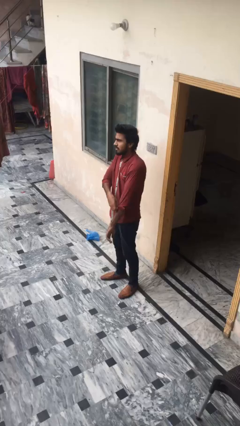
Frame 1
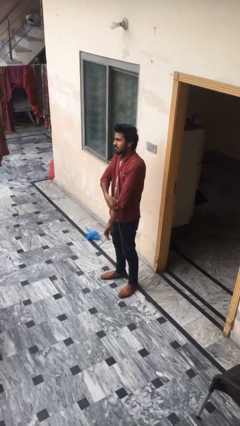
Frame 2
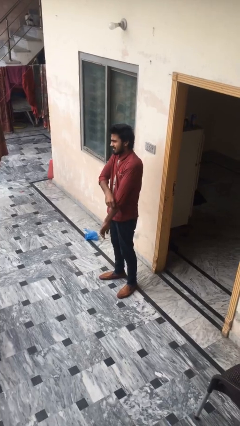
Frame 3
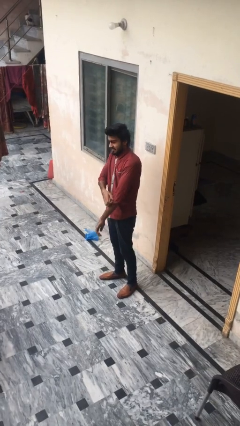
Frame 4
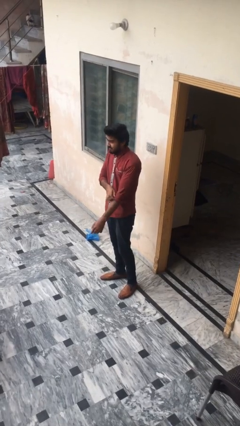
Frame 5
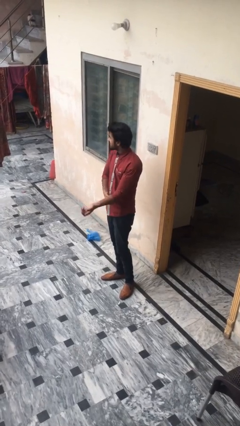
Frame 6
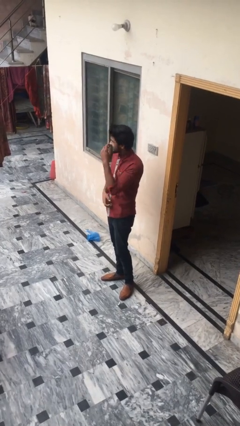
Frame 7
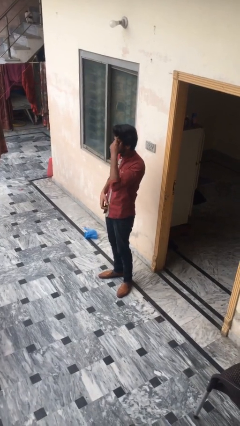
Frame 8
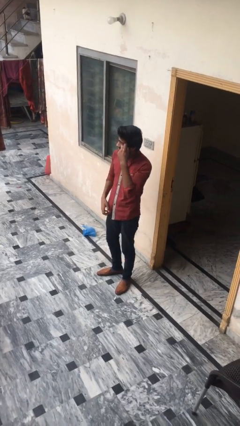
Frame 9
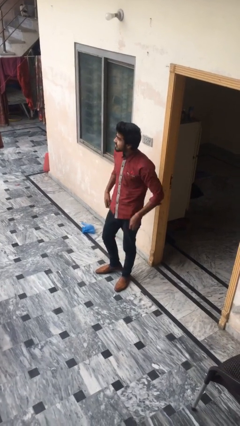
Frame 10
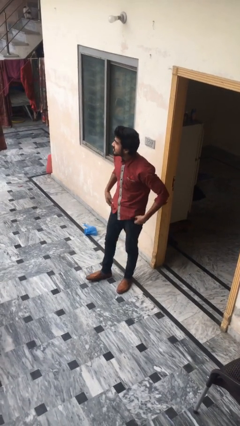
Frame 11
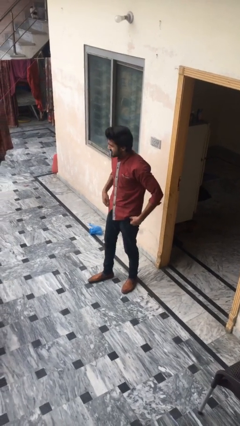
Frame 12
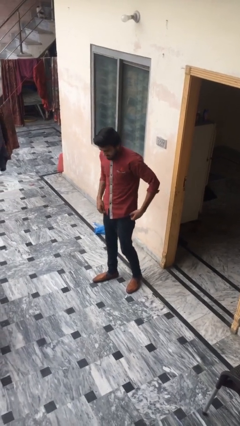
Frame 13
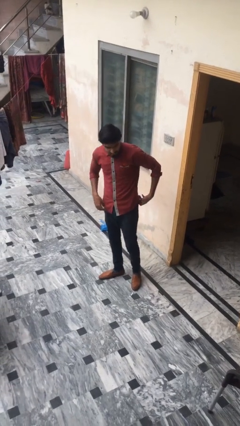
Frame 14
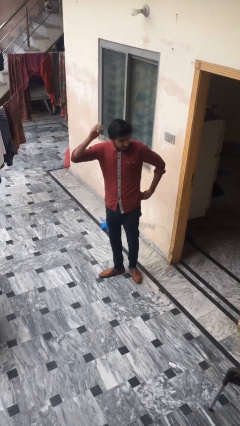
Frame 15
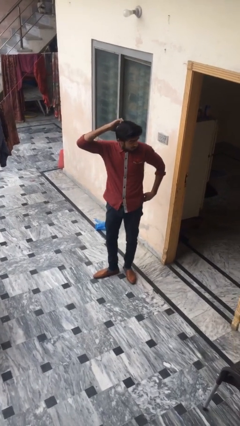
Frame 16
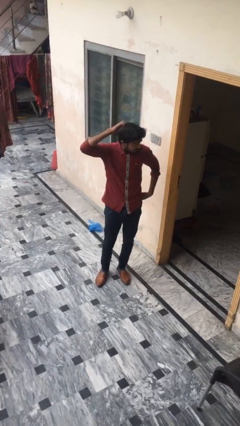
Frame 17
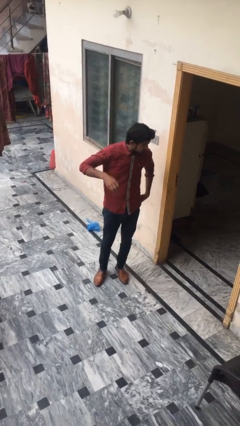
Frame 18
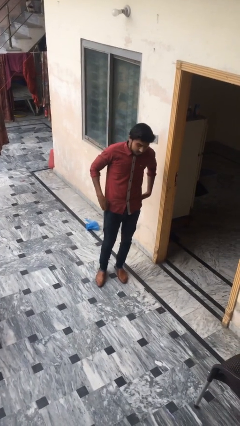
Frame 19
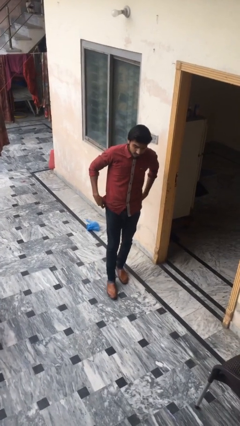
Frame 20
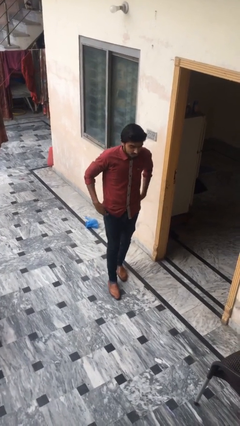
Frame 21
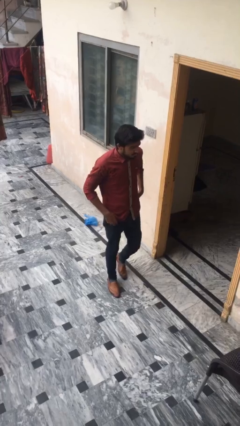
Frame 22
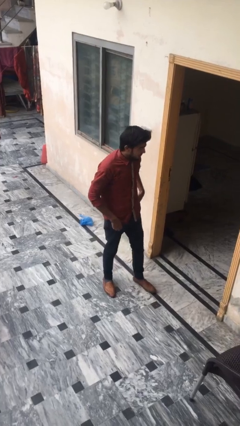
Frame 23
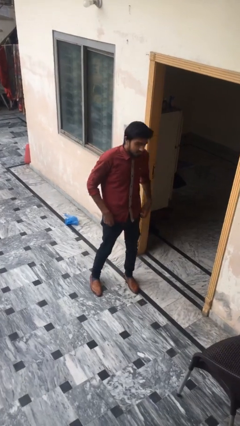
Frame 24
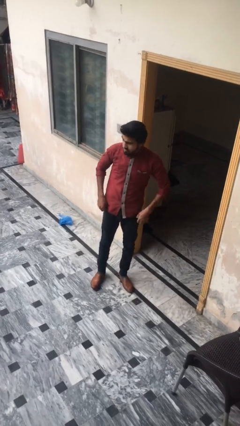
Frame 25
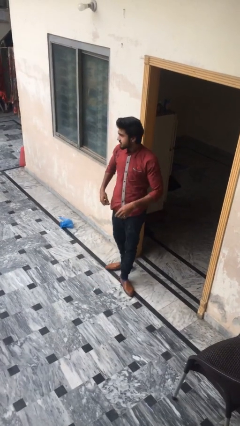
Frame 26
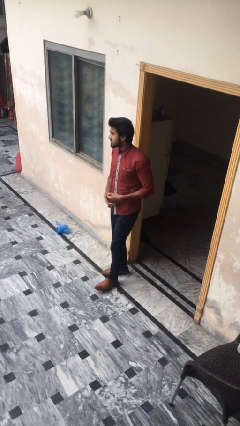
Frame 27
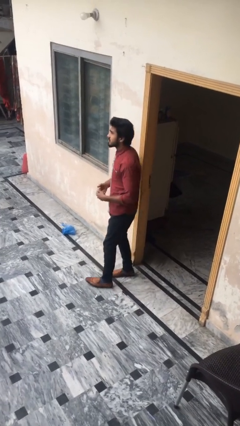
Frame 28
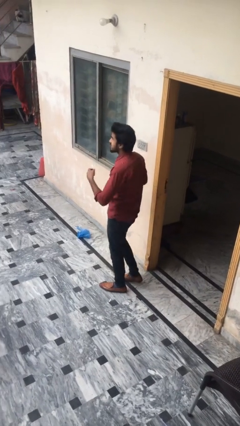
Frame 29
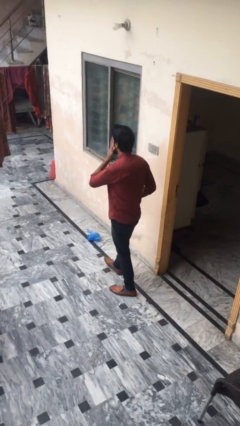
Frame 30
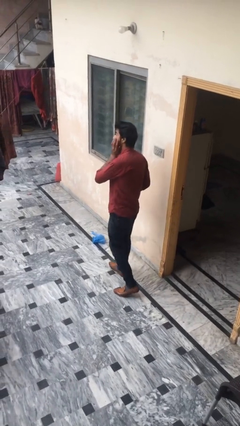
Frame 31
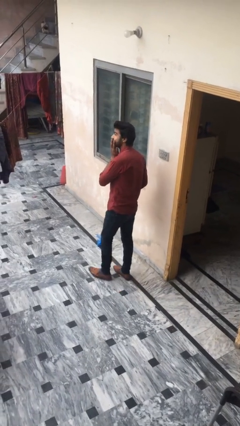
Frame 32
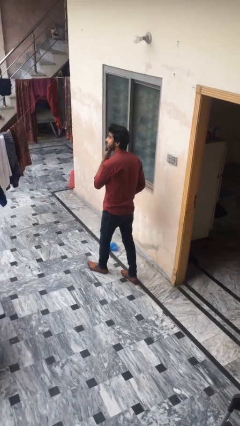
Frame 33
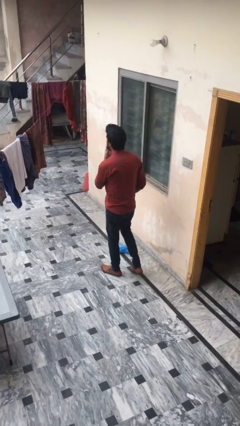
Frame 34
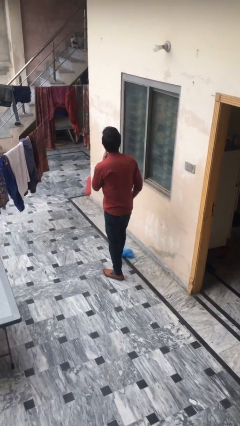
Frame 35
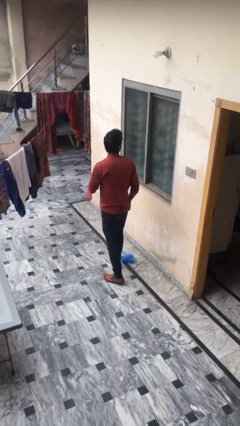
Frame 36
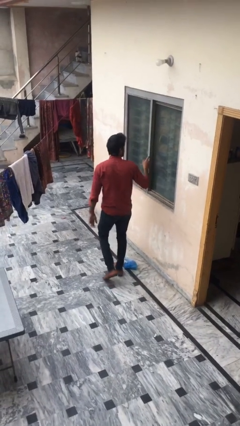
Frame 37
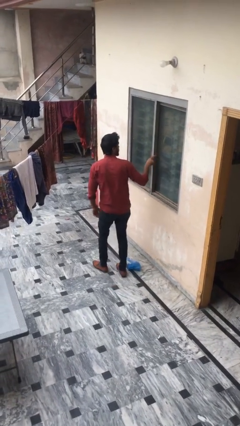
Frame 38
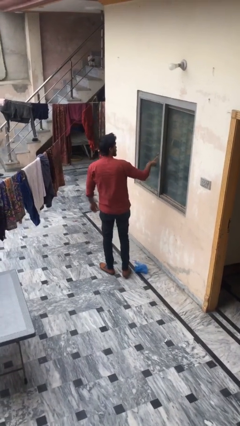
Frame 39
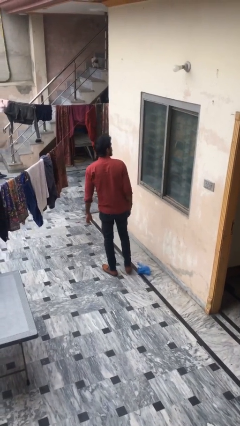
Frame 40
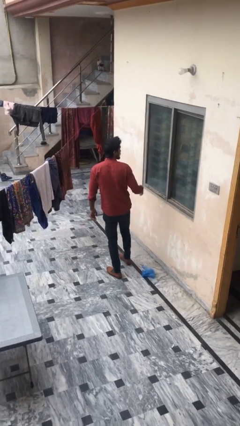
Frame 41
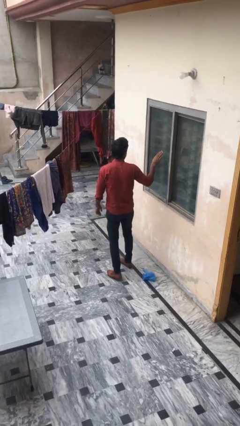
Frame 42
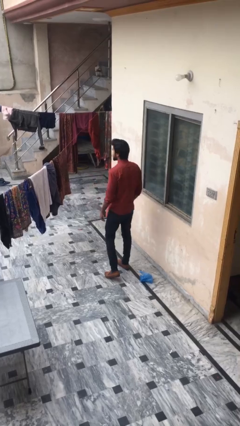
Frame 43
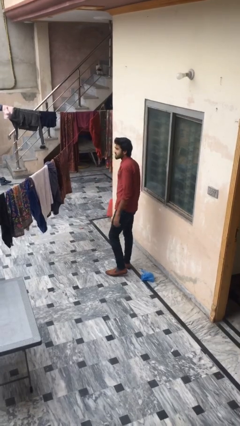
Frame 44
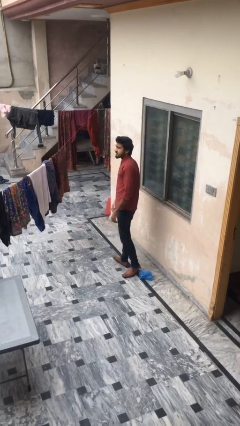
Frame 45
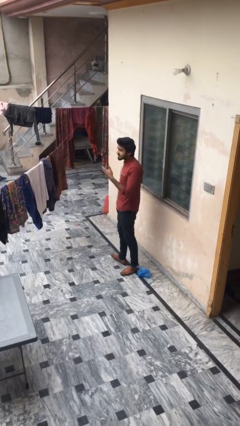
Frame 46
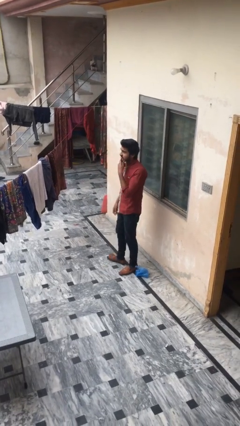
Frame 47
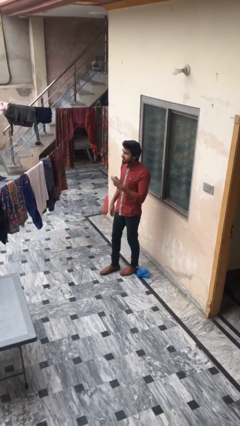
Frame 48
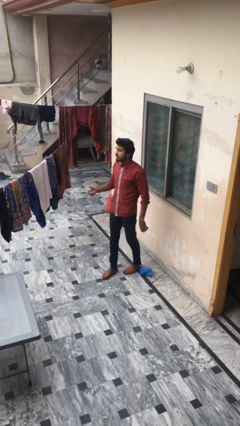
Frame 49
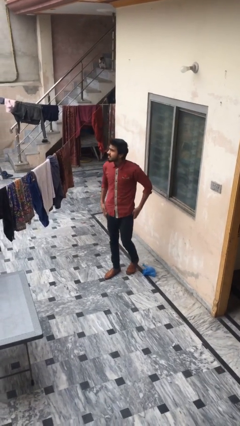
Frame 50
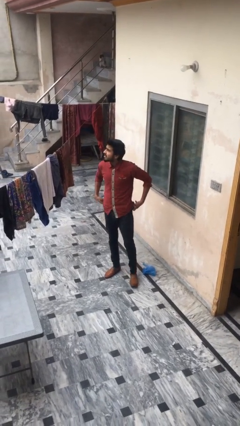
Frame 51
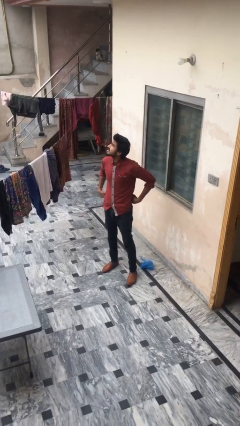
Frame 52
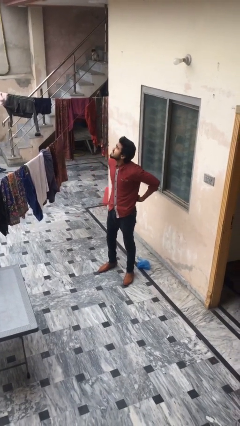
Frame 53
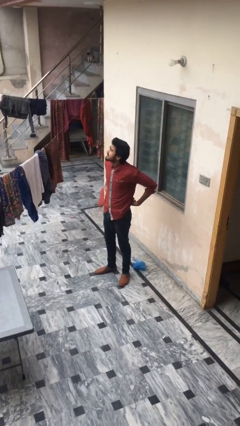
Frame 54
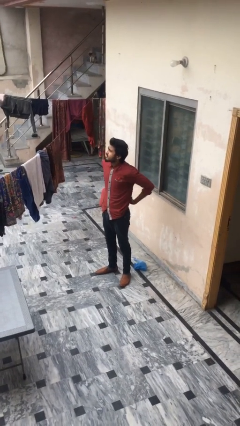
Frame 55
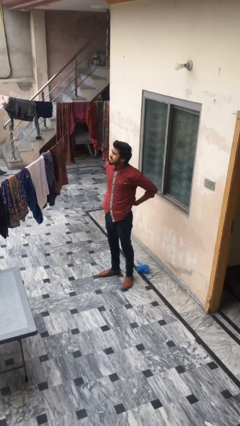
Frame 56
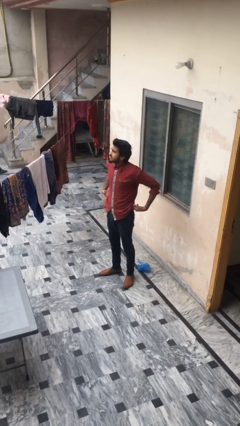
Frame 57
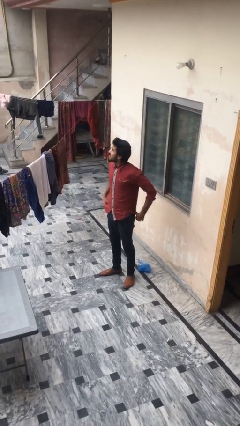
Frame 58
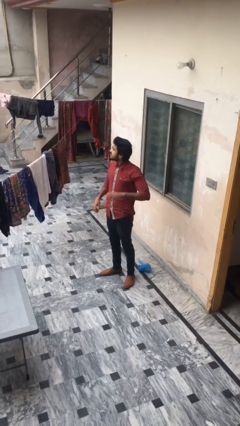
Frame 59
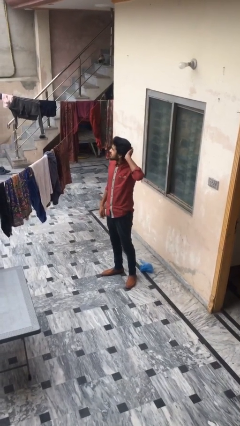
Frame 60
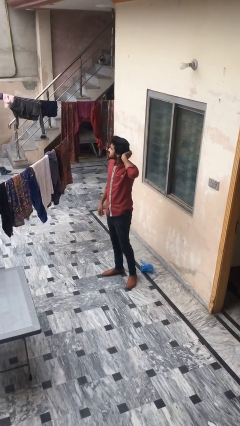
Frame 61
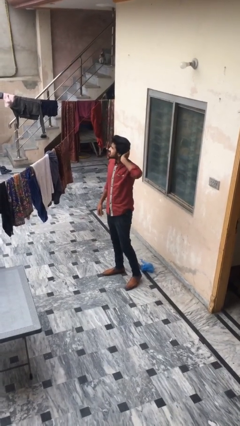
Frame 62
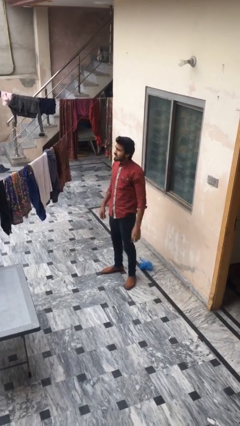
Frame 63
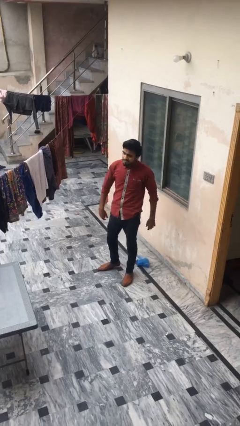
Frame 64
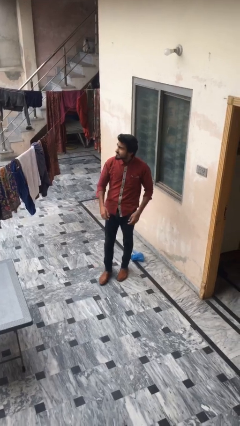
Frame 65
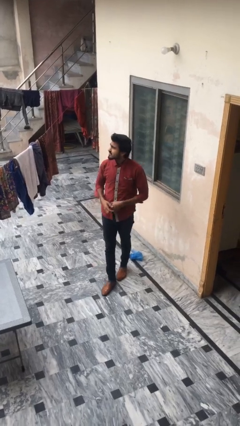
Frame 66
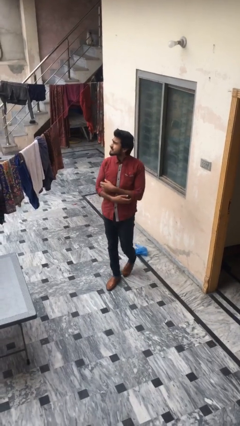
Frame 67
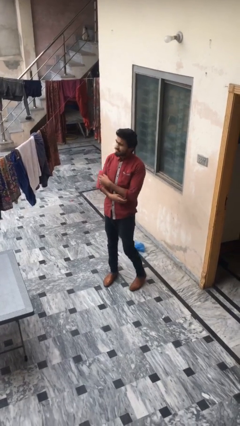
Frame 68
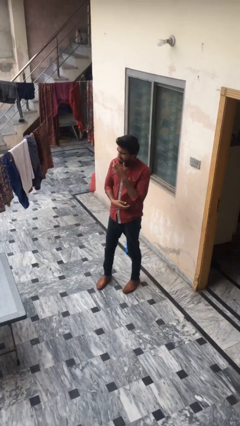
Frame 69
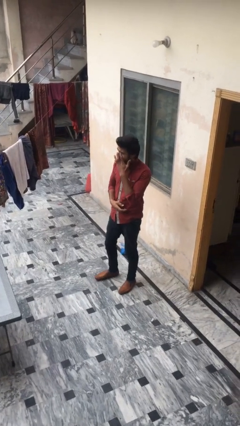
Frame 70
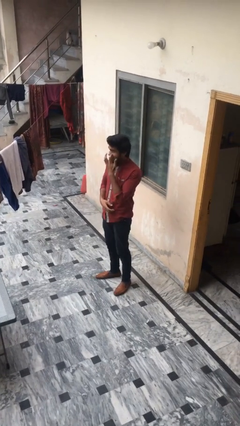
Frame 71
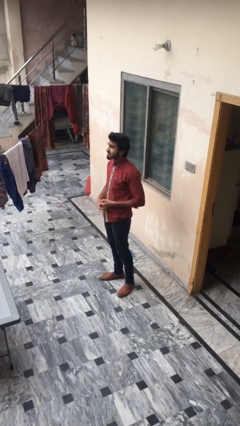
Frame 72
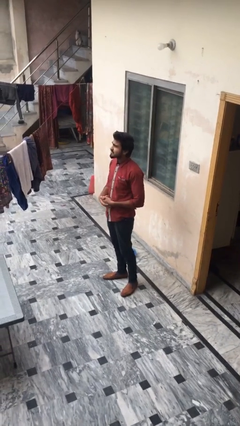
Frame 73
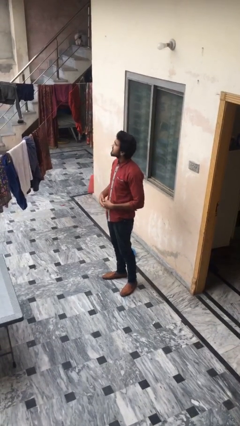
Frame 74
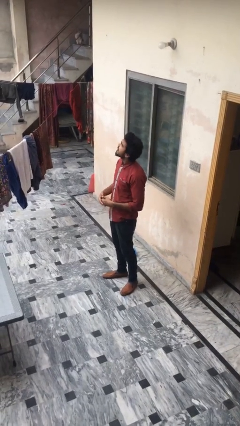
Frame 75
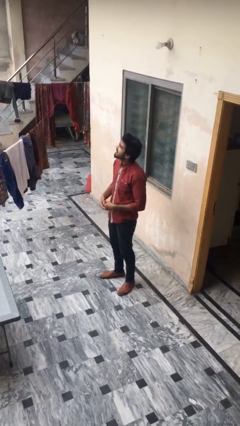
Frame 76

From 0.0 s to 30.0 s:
person walks

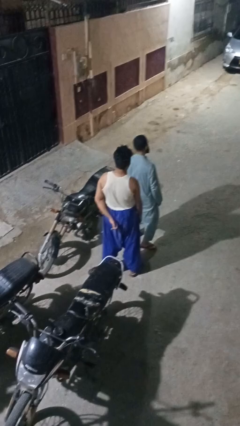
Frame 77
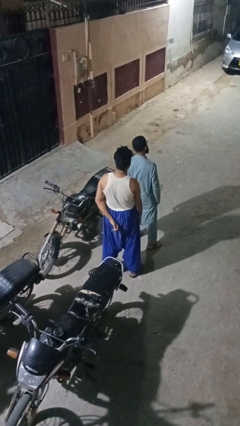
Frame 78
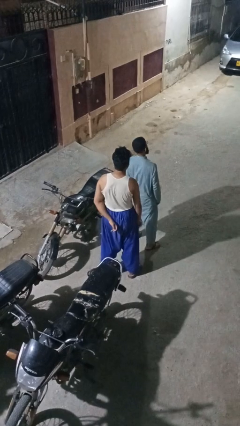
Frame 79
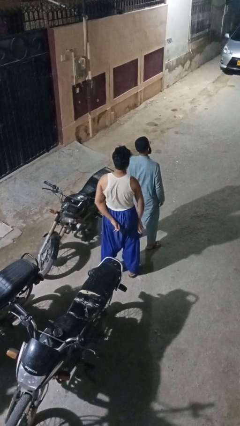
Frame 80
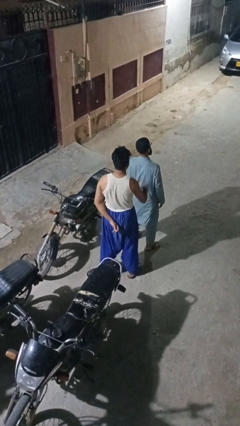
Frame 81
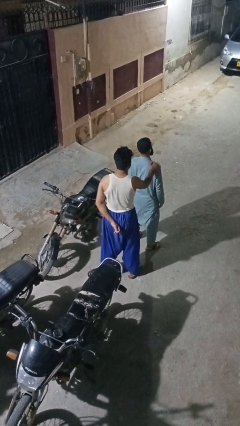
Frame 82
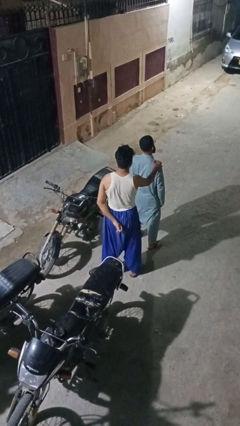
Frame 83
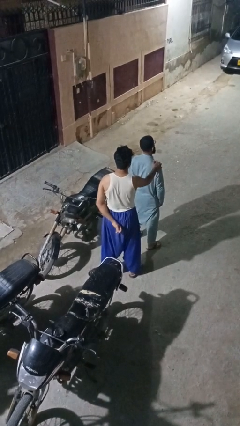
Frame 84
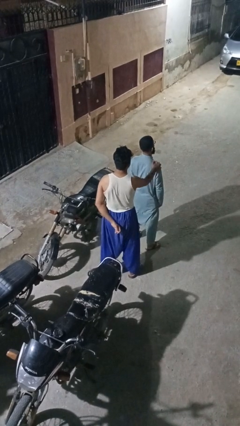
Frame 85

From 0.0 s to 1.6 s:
person grabs person by shoulder

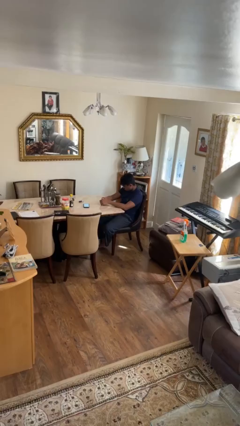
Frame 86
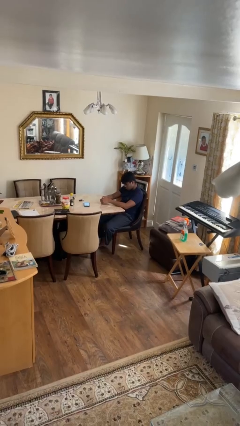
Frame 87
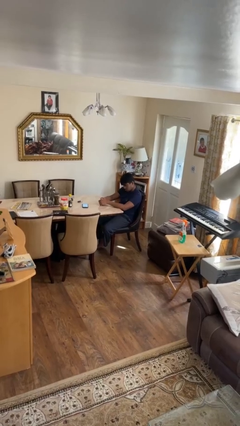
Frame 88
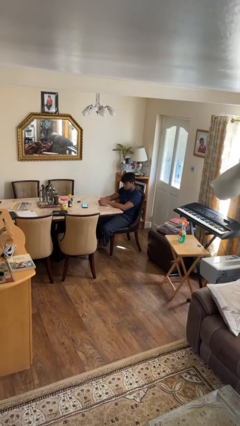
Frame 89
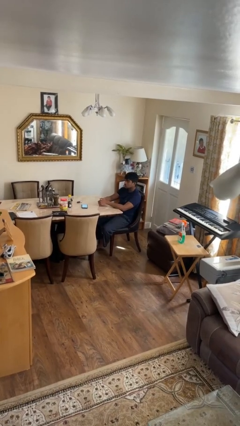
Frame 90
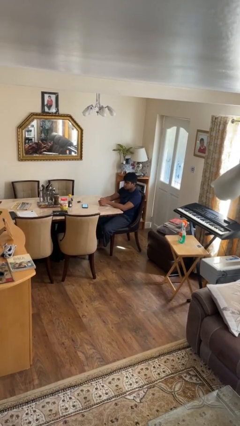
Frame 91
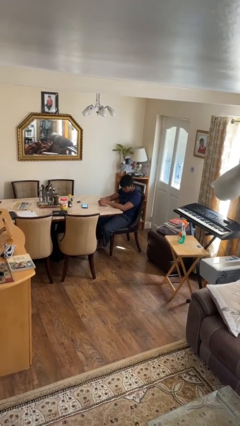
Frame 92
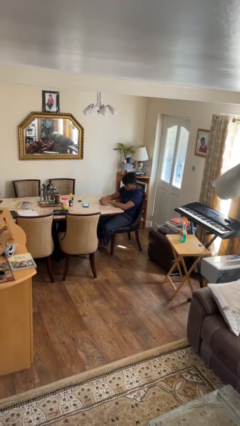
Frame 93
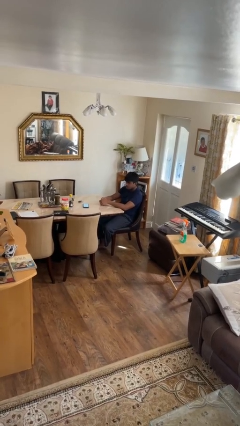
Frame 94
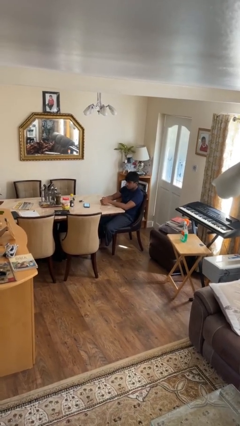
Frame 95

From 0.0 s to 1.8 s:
person nods head
